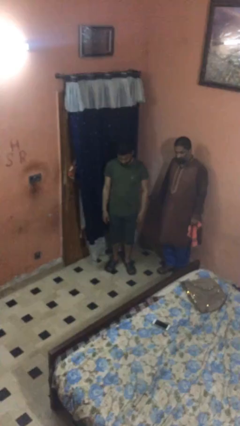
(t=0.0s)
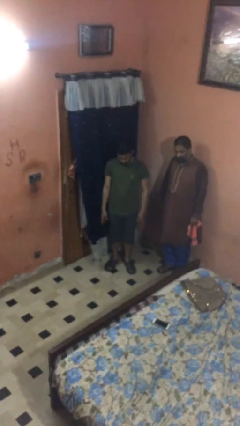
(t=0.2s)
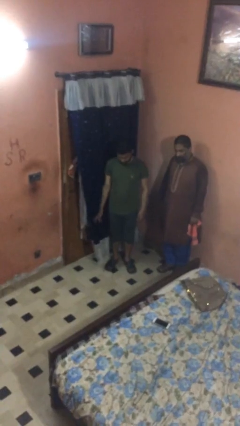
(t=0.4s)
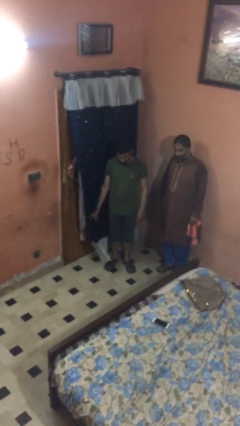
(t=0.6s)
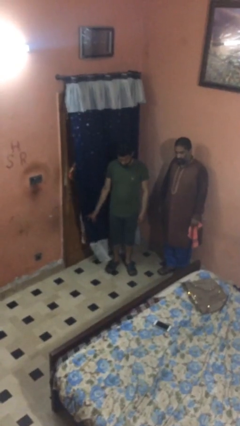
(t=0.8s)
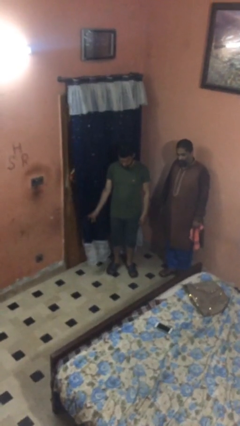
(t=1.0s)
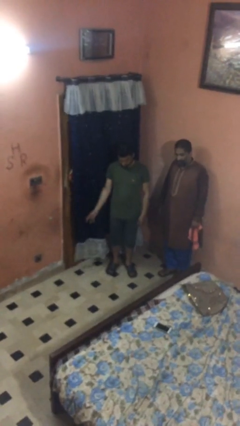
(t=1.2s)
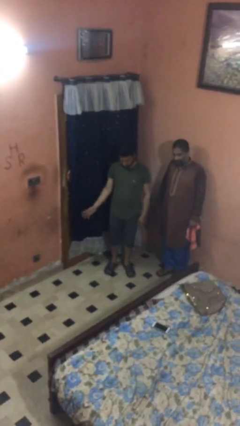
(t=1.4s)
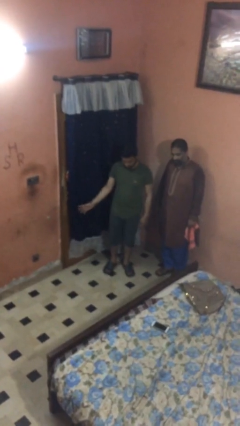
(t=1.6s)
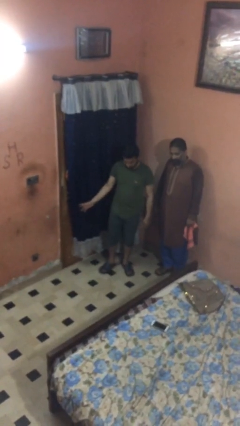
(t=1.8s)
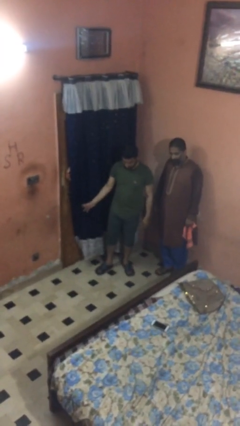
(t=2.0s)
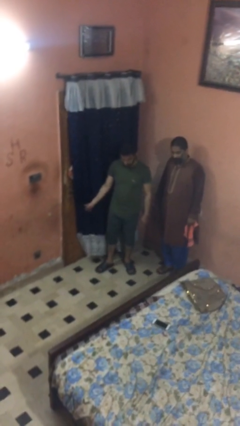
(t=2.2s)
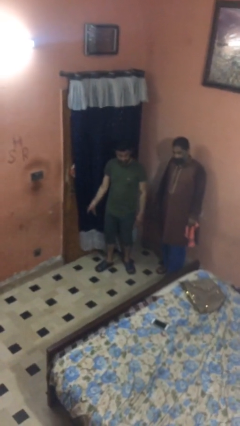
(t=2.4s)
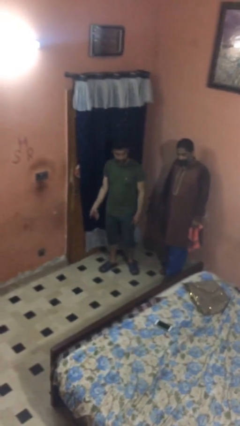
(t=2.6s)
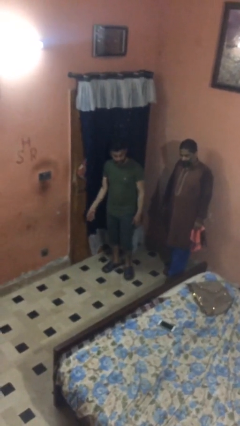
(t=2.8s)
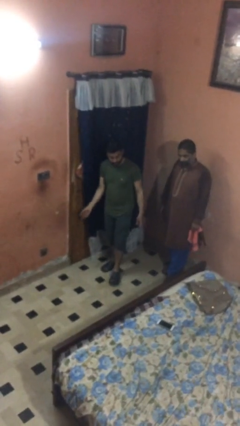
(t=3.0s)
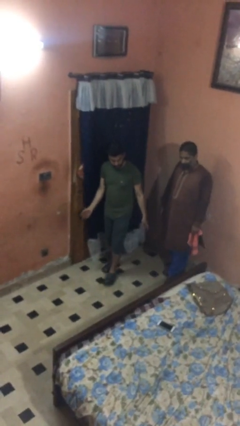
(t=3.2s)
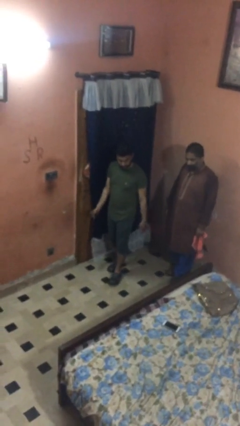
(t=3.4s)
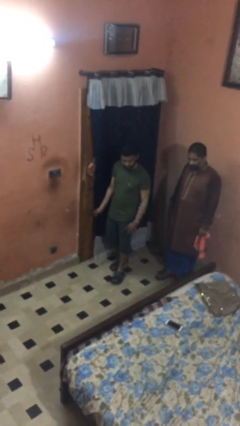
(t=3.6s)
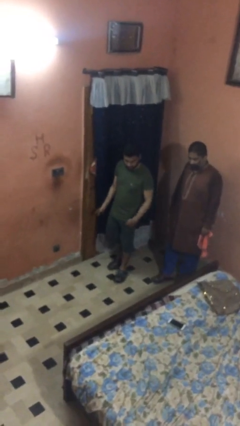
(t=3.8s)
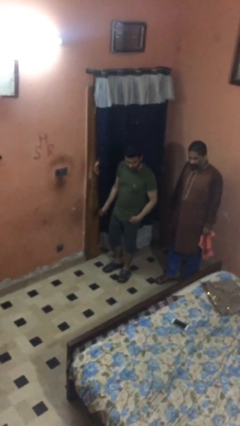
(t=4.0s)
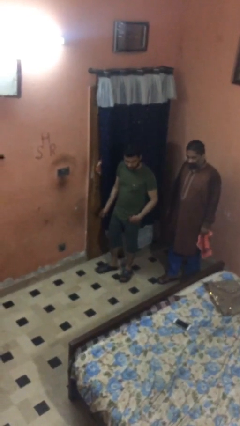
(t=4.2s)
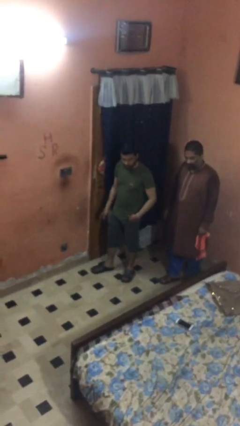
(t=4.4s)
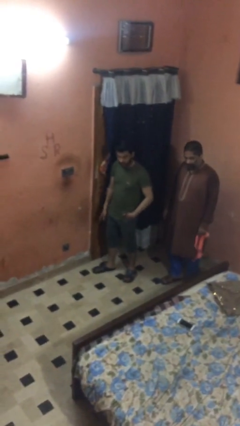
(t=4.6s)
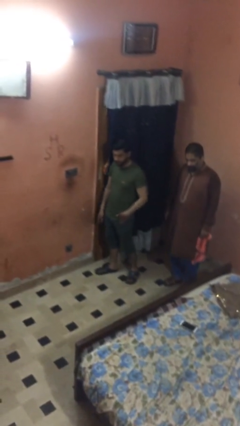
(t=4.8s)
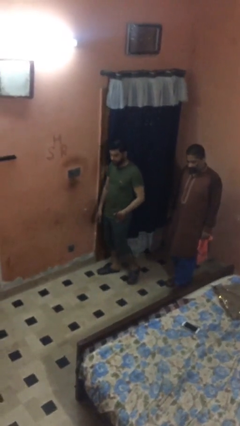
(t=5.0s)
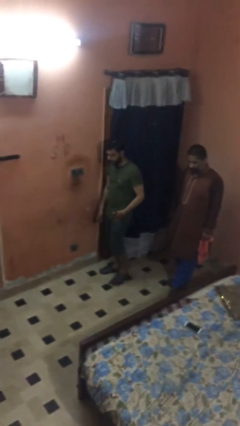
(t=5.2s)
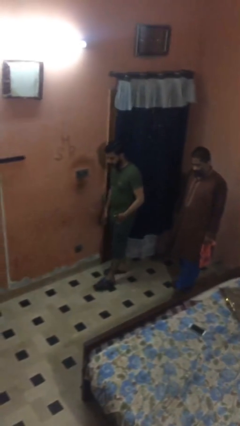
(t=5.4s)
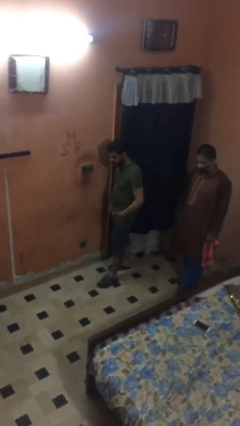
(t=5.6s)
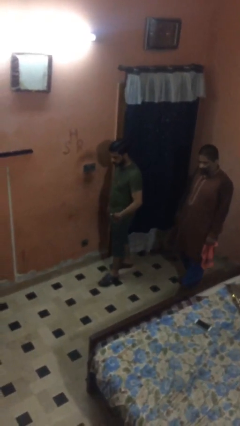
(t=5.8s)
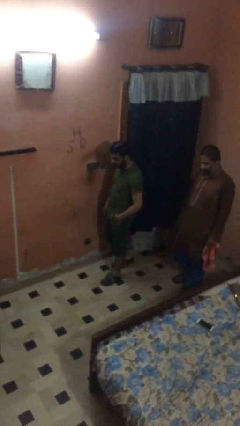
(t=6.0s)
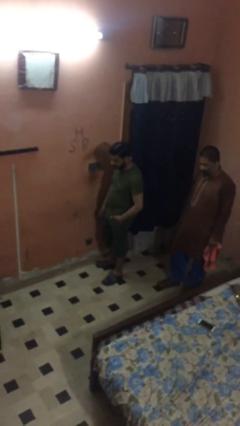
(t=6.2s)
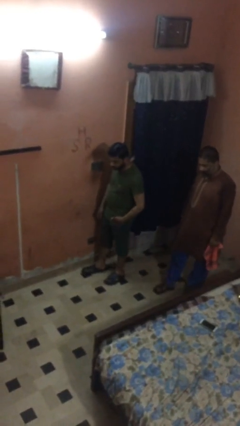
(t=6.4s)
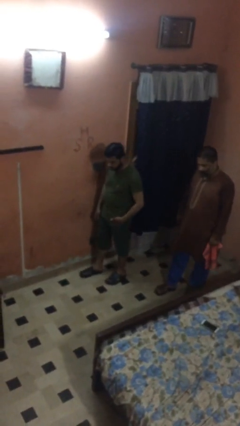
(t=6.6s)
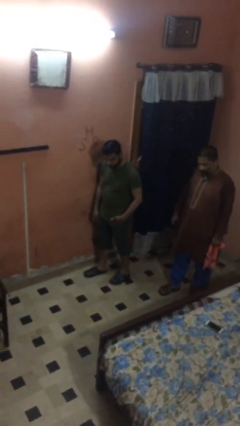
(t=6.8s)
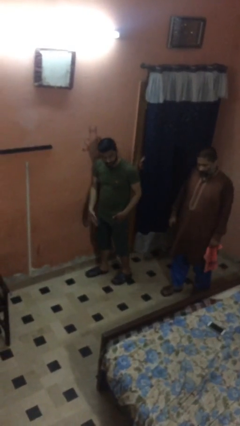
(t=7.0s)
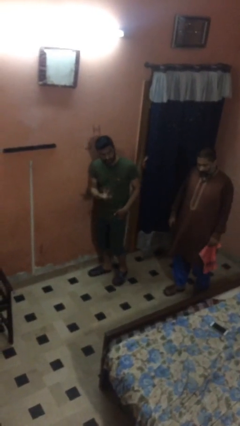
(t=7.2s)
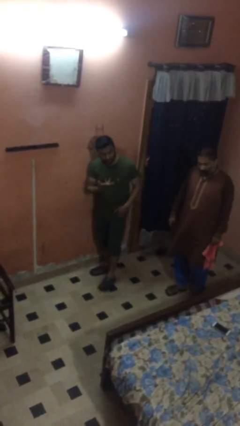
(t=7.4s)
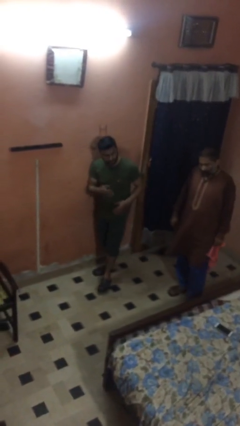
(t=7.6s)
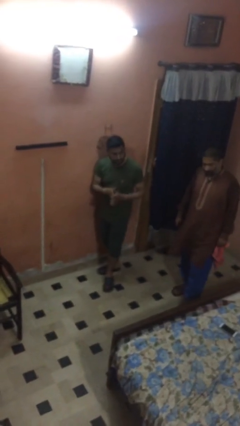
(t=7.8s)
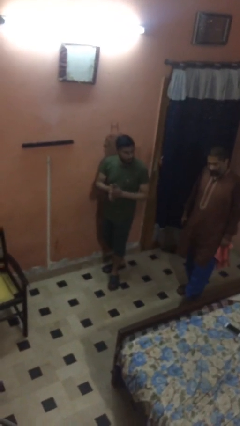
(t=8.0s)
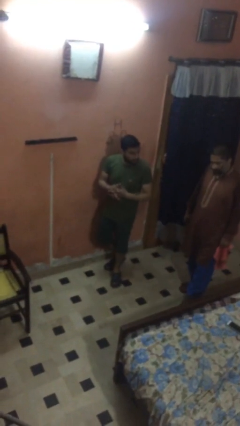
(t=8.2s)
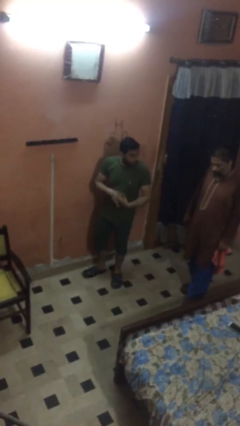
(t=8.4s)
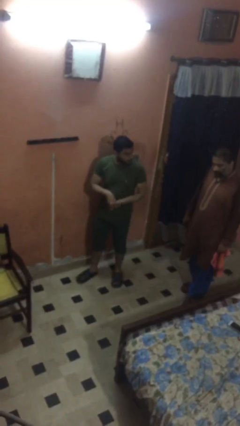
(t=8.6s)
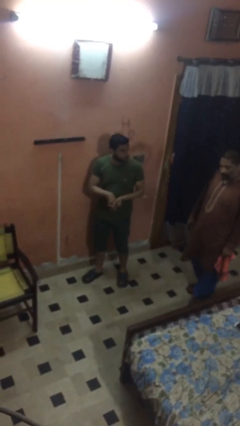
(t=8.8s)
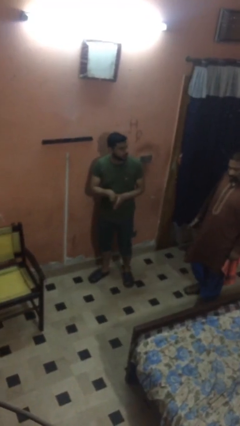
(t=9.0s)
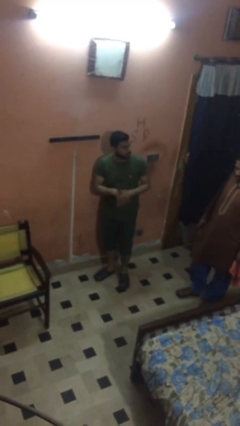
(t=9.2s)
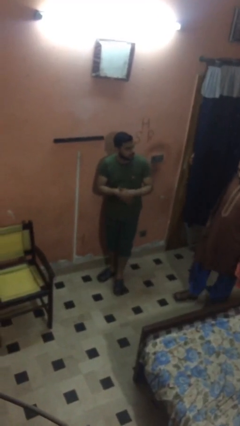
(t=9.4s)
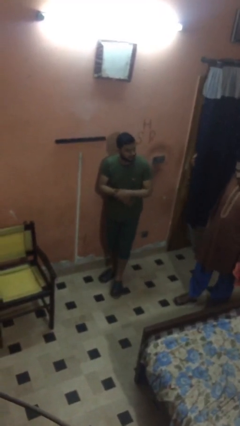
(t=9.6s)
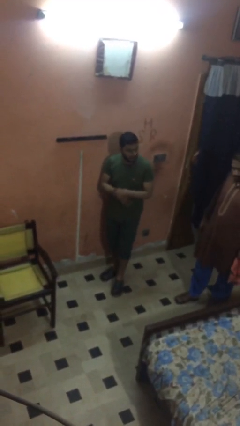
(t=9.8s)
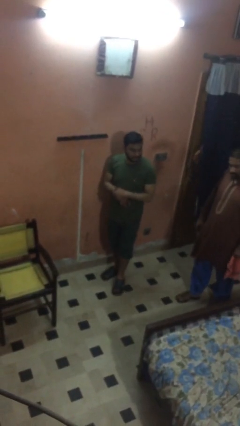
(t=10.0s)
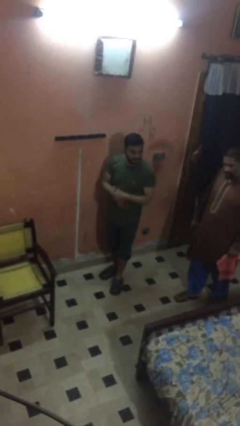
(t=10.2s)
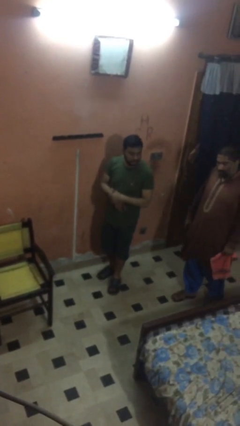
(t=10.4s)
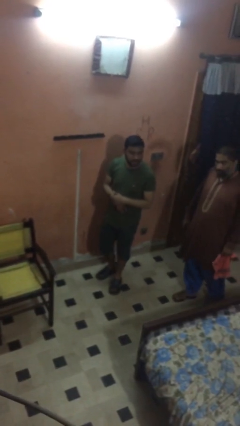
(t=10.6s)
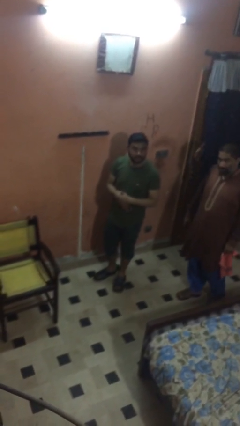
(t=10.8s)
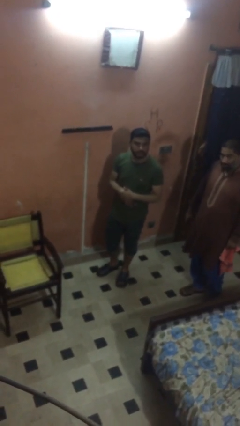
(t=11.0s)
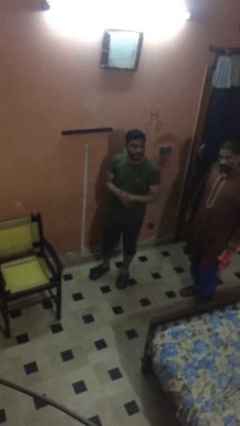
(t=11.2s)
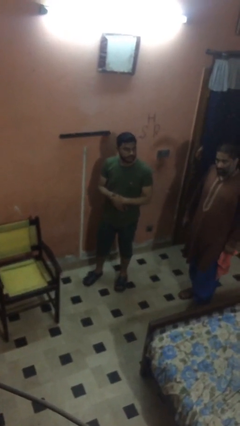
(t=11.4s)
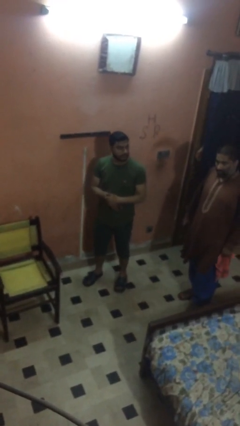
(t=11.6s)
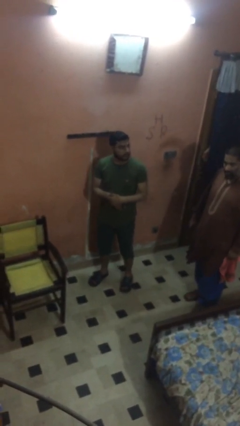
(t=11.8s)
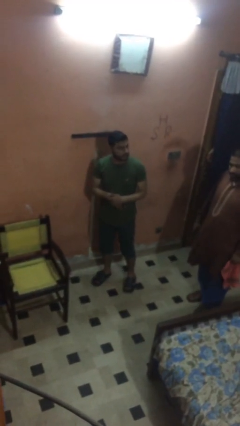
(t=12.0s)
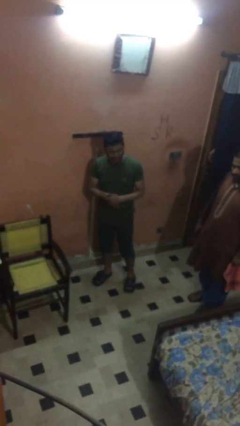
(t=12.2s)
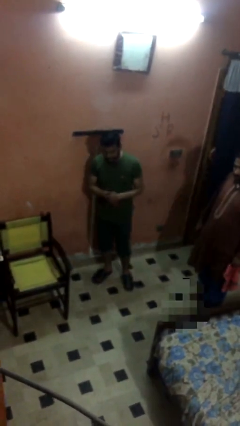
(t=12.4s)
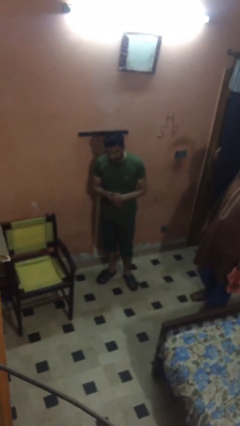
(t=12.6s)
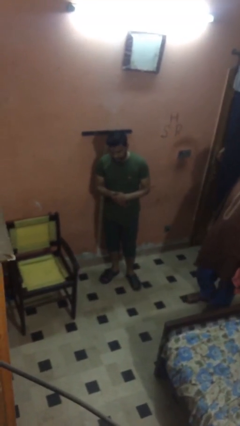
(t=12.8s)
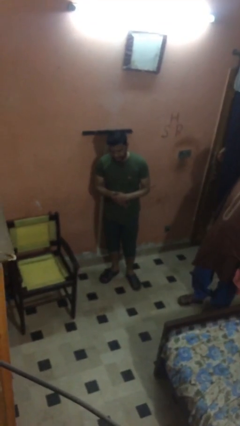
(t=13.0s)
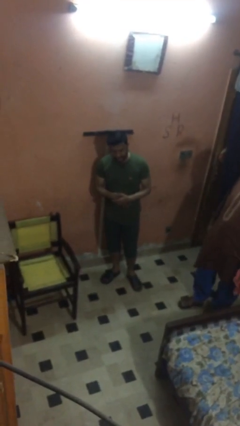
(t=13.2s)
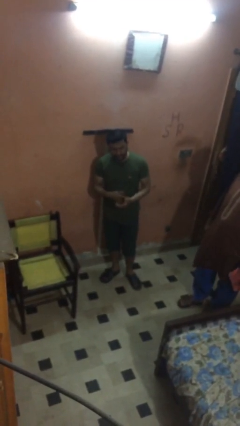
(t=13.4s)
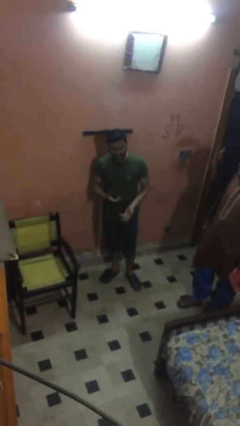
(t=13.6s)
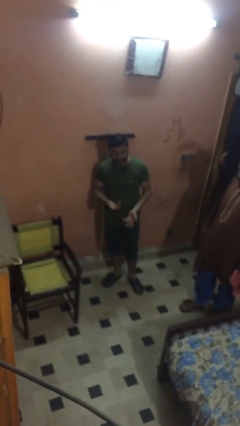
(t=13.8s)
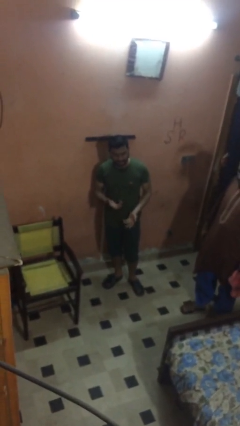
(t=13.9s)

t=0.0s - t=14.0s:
person talks to person

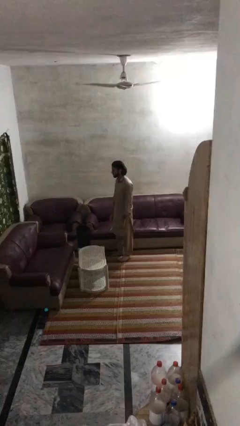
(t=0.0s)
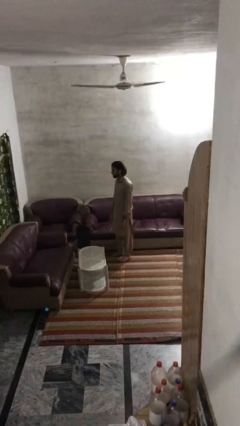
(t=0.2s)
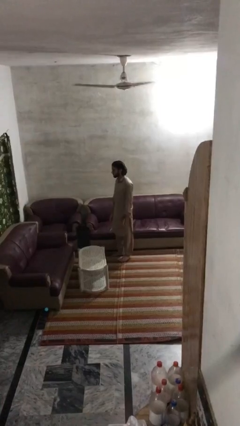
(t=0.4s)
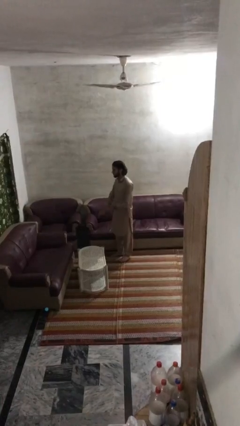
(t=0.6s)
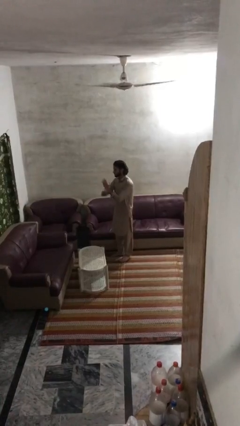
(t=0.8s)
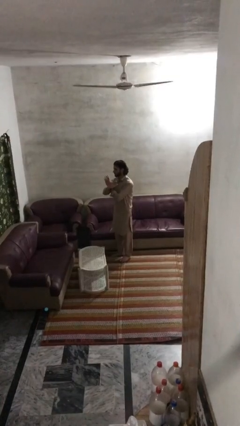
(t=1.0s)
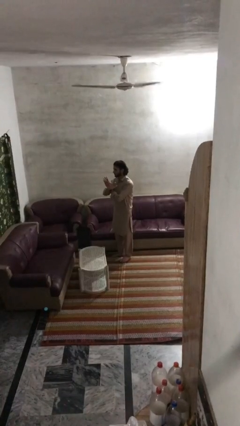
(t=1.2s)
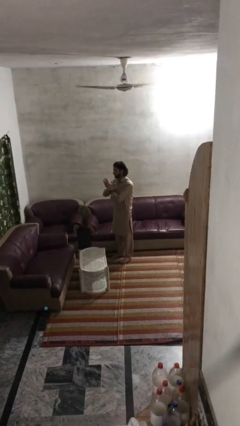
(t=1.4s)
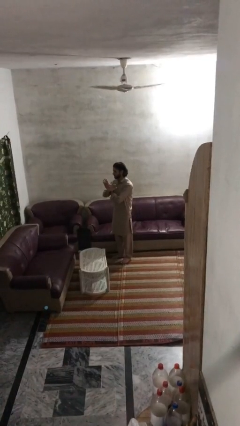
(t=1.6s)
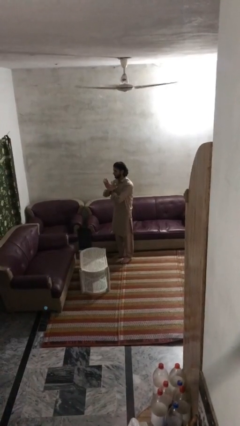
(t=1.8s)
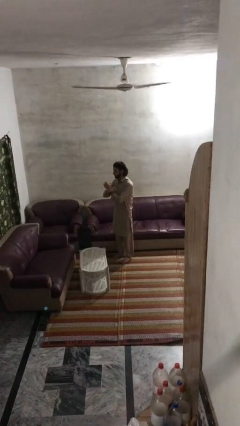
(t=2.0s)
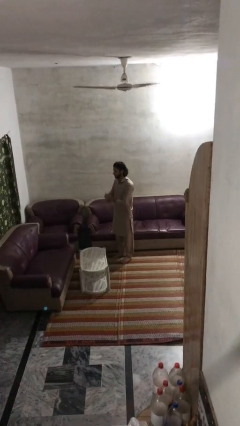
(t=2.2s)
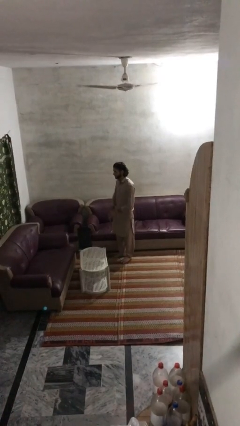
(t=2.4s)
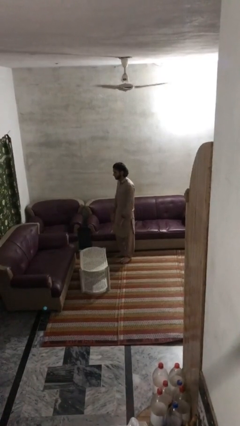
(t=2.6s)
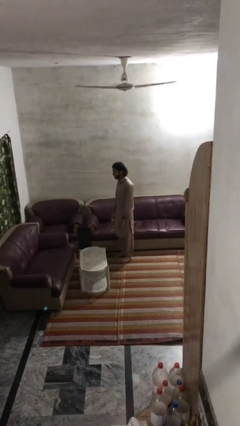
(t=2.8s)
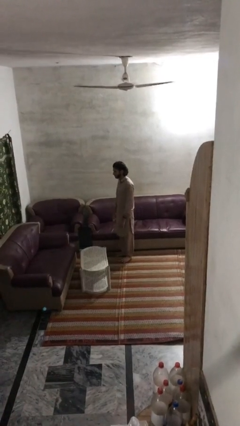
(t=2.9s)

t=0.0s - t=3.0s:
person gestures arms x

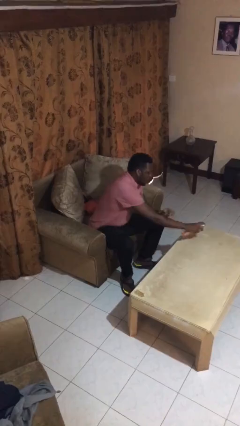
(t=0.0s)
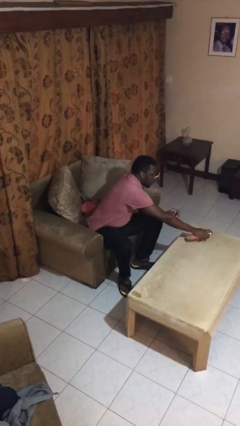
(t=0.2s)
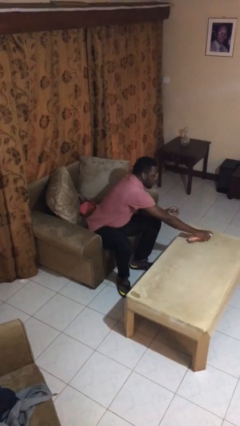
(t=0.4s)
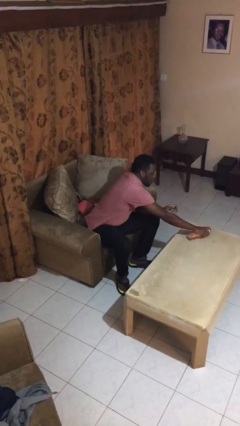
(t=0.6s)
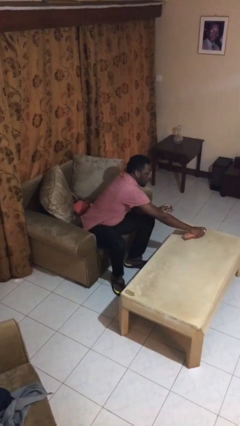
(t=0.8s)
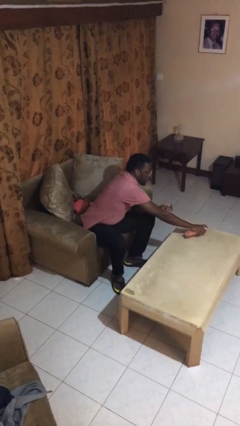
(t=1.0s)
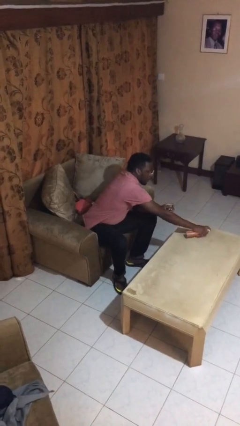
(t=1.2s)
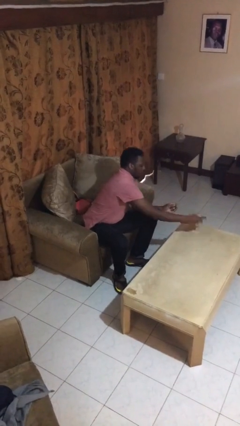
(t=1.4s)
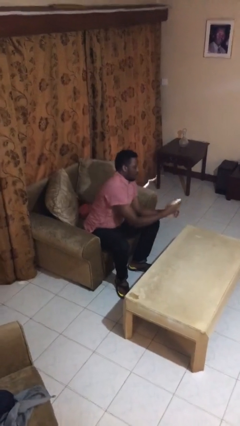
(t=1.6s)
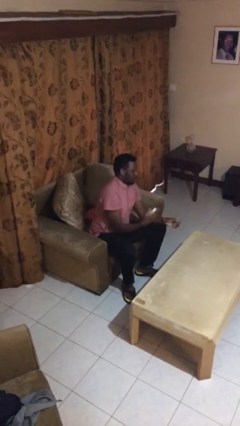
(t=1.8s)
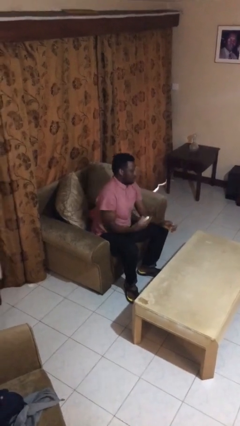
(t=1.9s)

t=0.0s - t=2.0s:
person sprays from bottle
